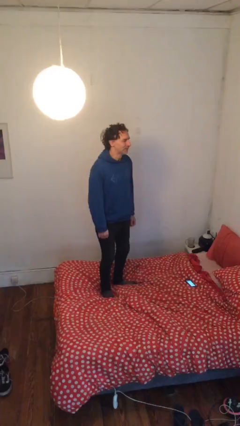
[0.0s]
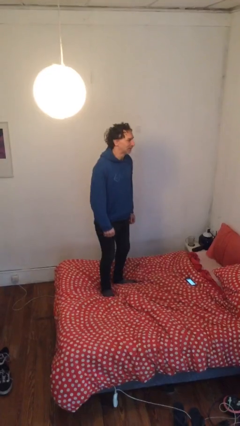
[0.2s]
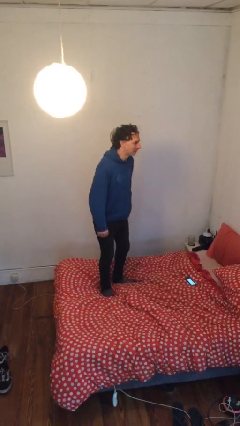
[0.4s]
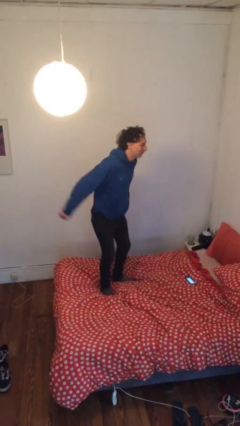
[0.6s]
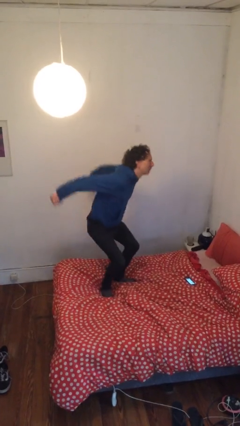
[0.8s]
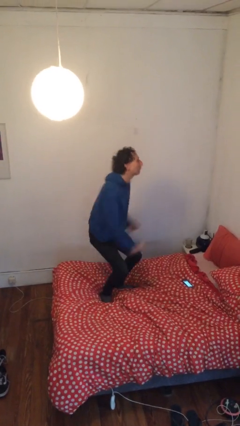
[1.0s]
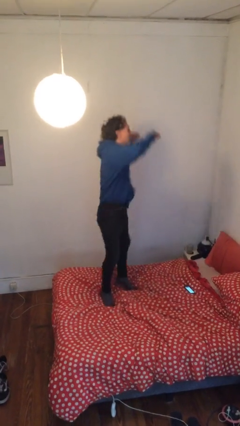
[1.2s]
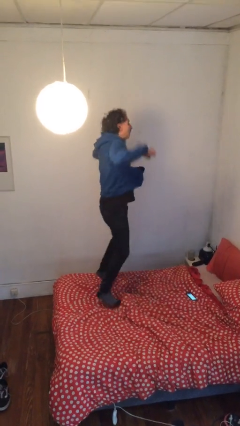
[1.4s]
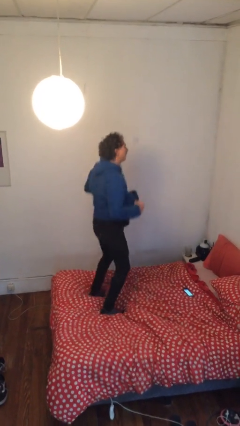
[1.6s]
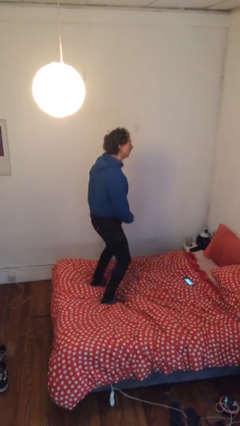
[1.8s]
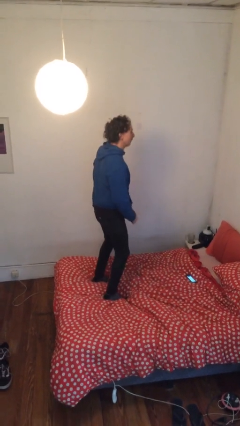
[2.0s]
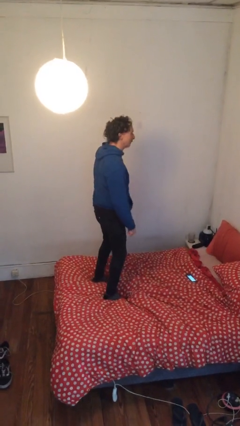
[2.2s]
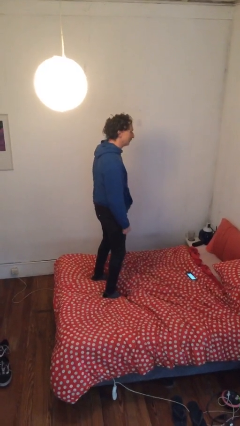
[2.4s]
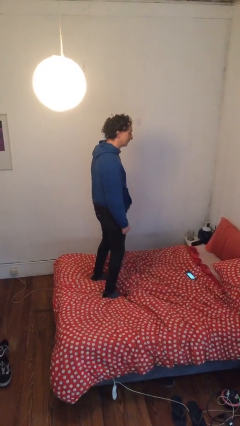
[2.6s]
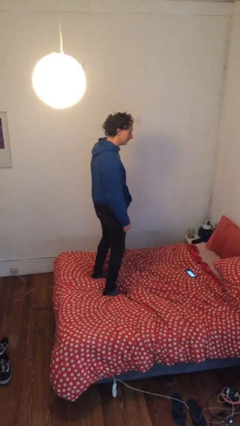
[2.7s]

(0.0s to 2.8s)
person jumps on bed

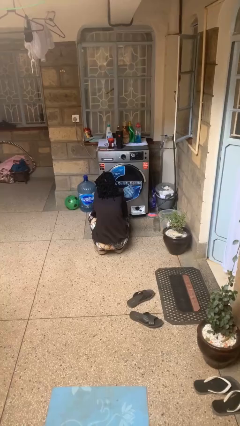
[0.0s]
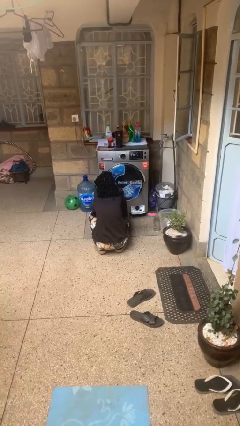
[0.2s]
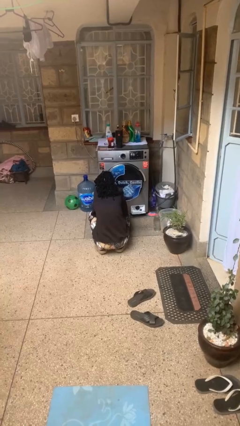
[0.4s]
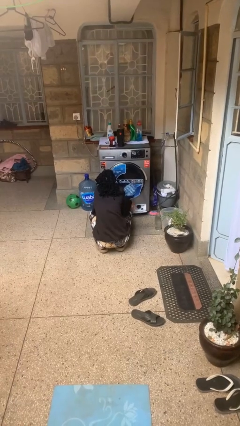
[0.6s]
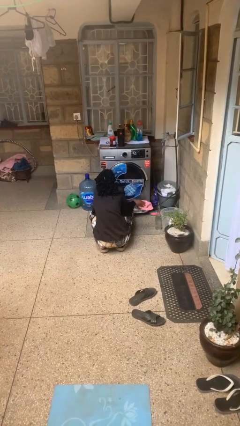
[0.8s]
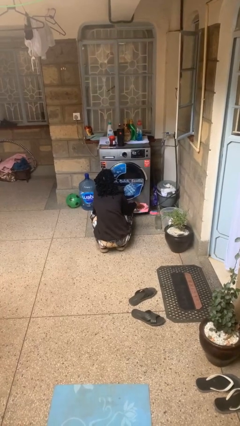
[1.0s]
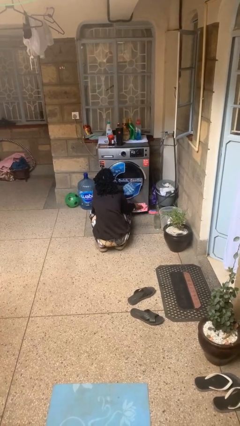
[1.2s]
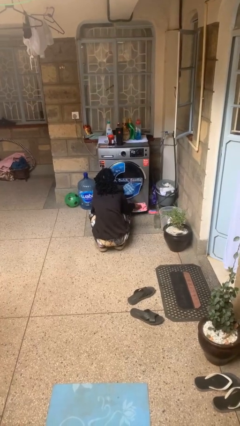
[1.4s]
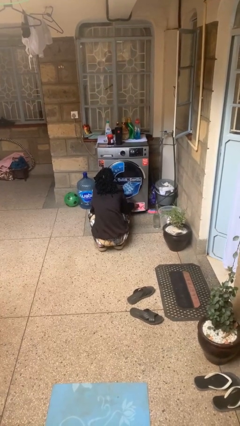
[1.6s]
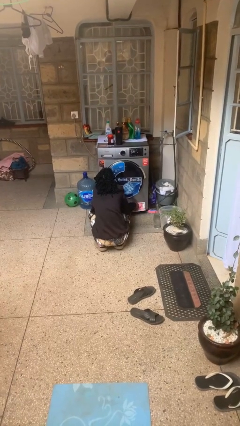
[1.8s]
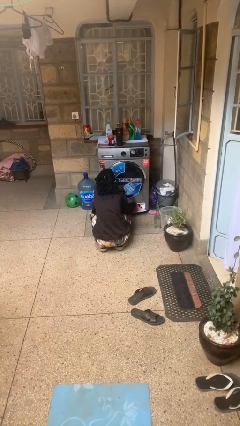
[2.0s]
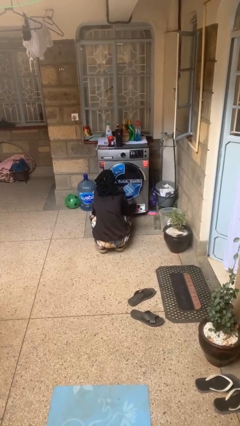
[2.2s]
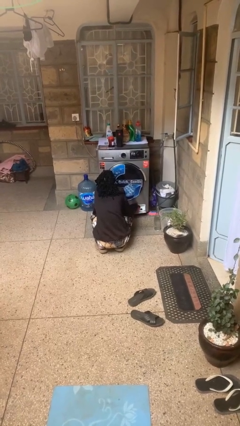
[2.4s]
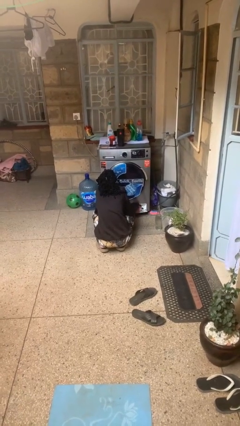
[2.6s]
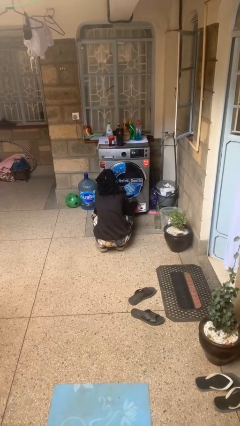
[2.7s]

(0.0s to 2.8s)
person cleans dryer lint trap

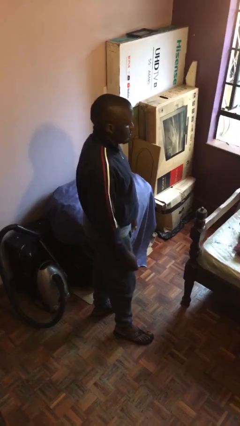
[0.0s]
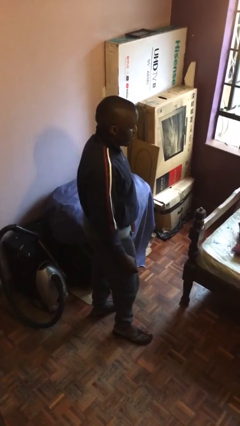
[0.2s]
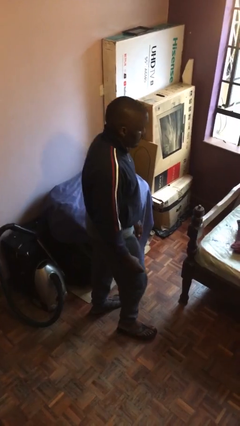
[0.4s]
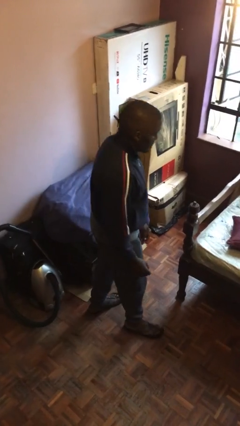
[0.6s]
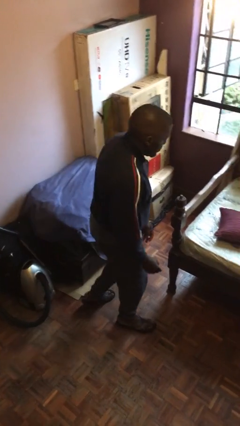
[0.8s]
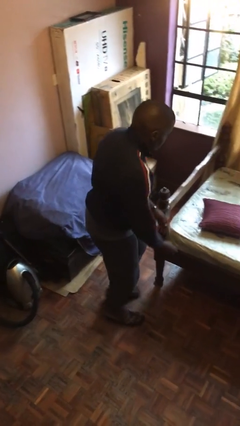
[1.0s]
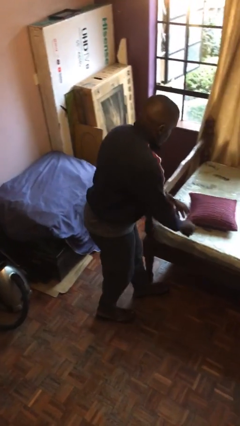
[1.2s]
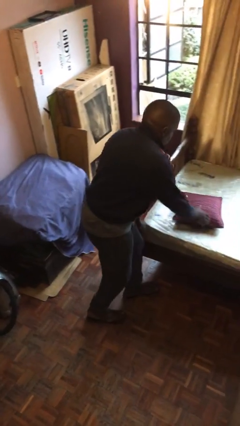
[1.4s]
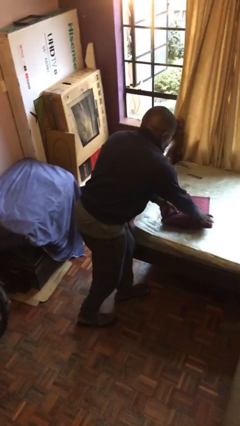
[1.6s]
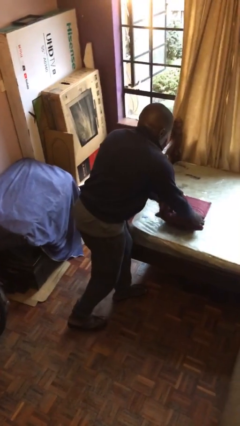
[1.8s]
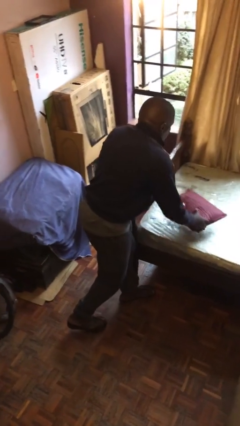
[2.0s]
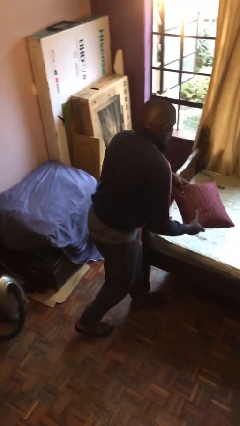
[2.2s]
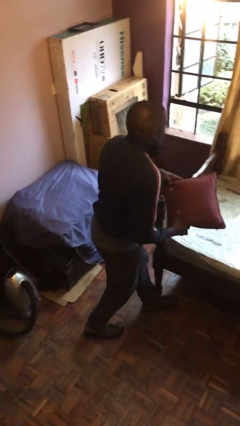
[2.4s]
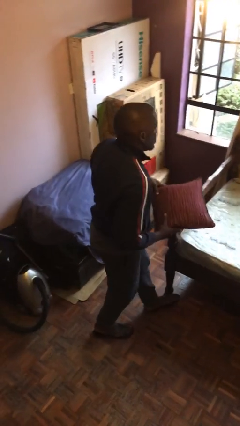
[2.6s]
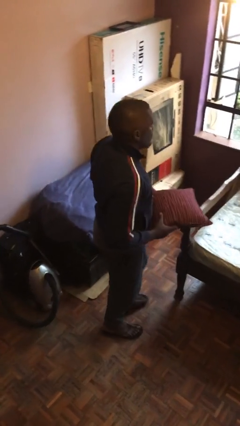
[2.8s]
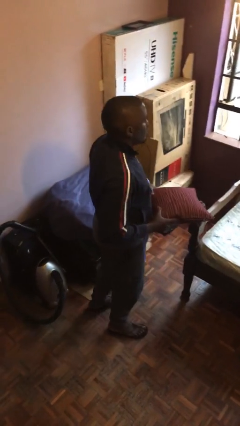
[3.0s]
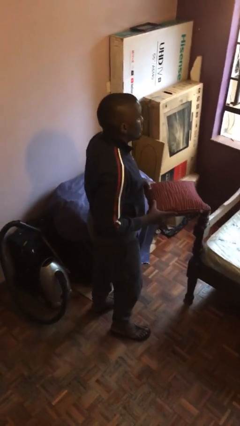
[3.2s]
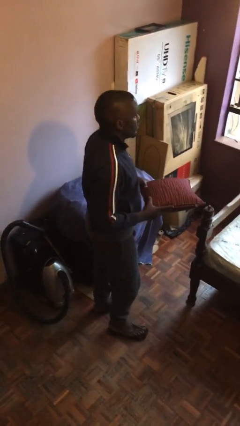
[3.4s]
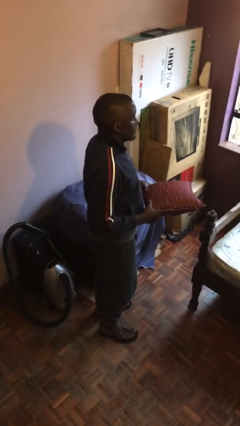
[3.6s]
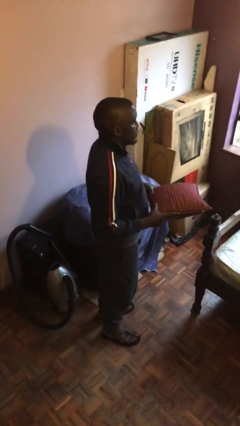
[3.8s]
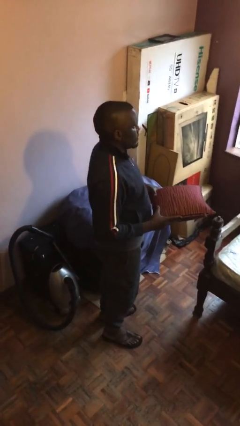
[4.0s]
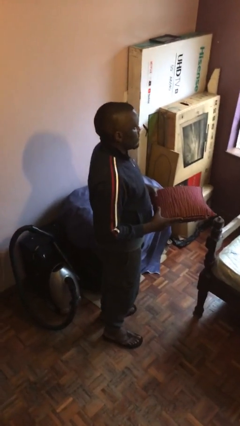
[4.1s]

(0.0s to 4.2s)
person picks up object from bed

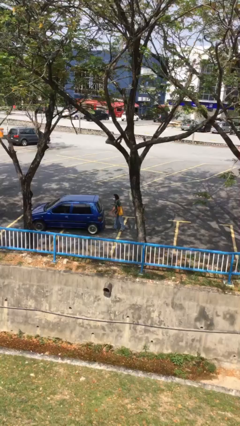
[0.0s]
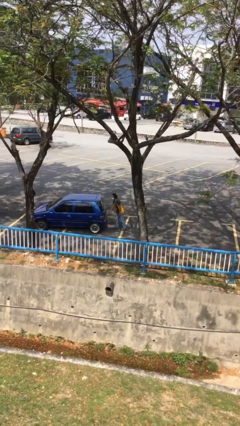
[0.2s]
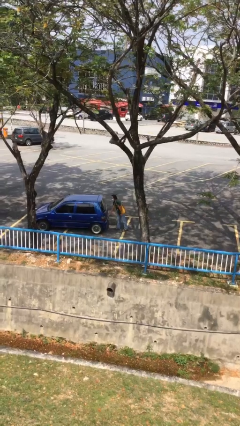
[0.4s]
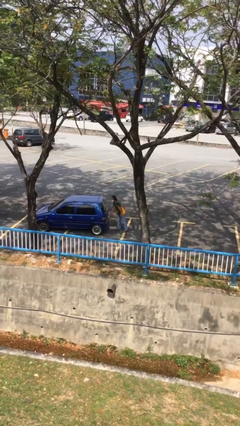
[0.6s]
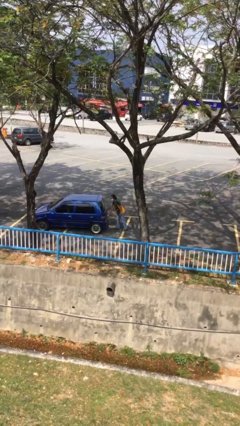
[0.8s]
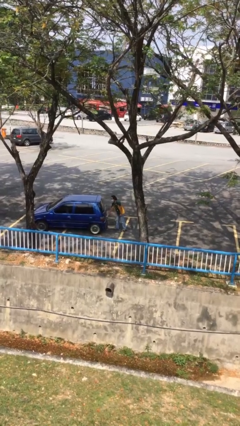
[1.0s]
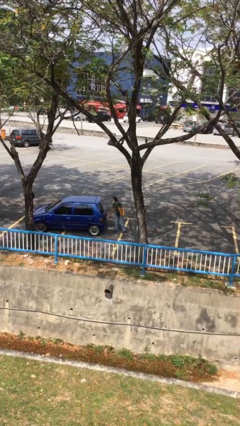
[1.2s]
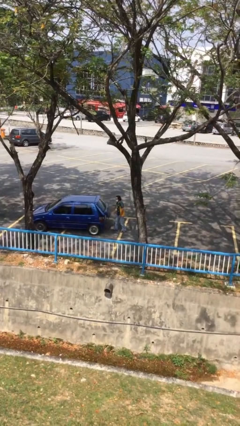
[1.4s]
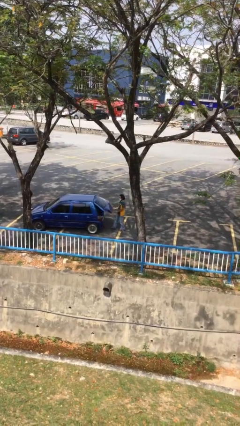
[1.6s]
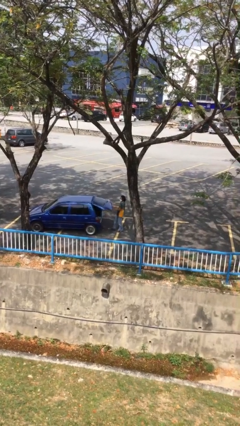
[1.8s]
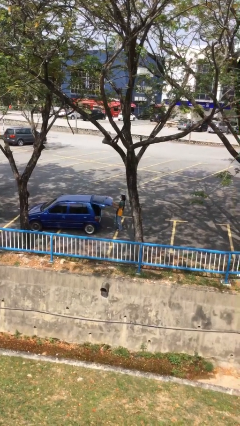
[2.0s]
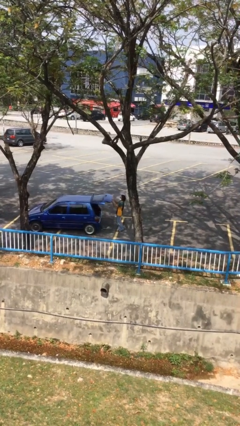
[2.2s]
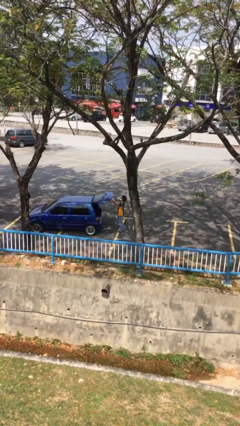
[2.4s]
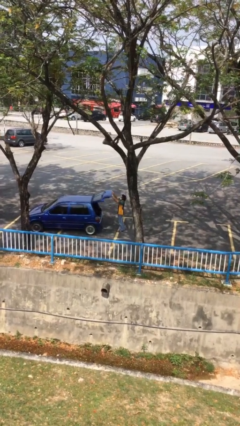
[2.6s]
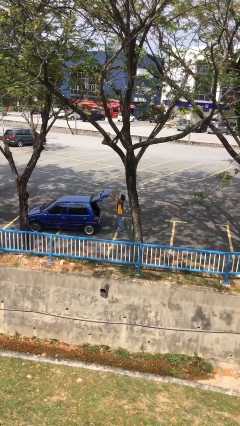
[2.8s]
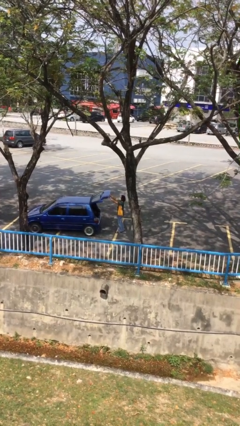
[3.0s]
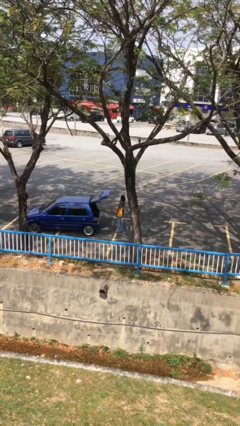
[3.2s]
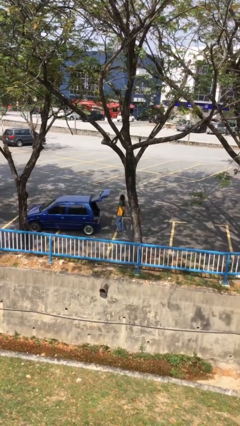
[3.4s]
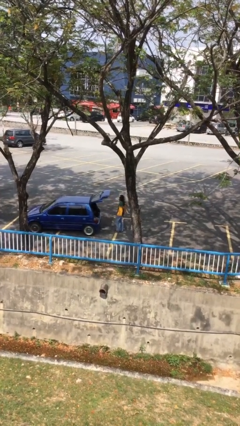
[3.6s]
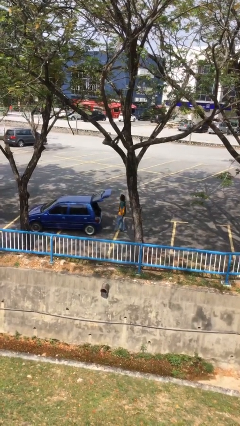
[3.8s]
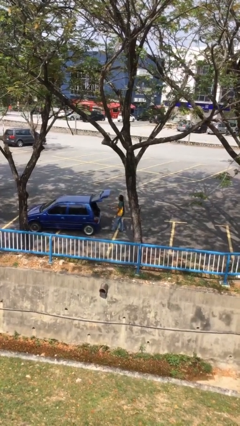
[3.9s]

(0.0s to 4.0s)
person opens car trunk

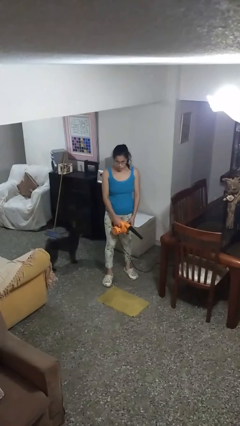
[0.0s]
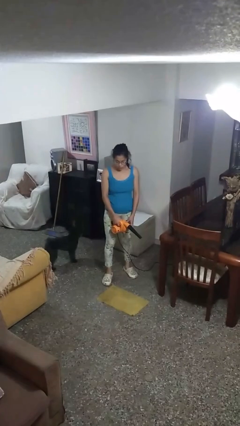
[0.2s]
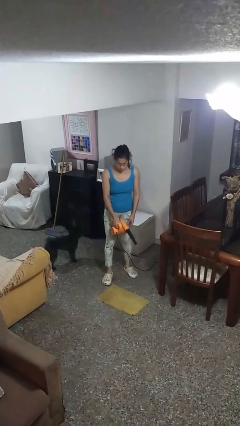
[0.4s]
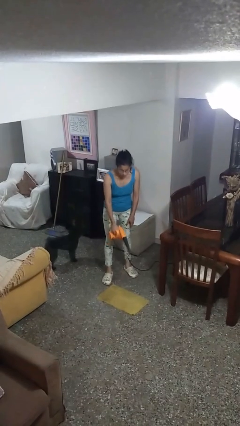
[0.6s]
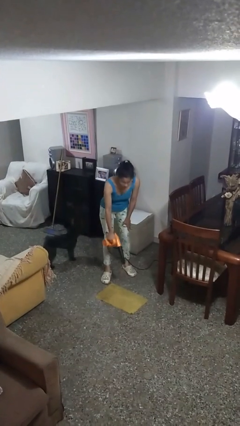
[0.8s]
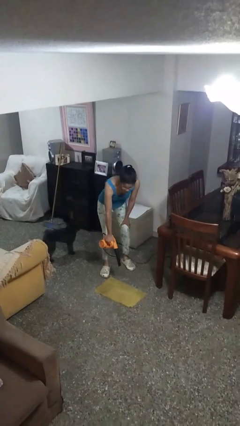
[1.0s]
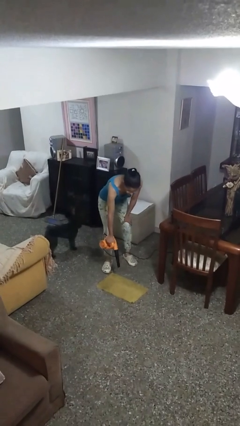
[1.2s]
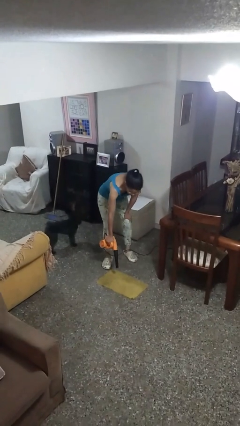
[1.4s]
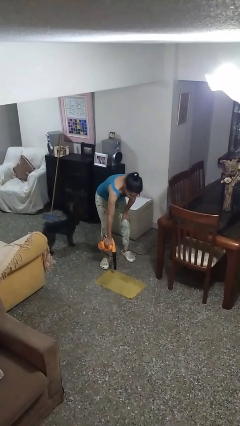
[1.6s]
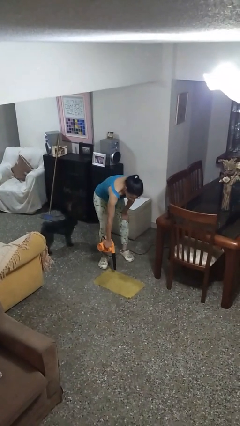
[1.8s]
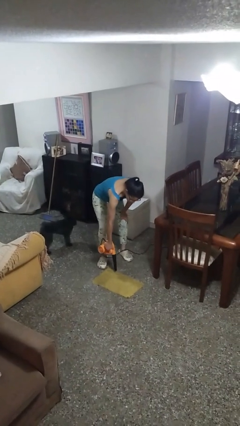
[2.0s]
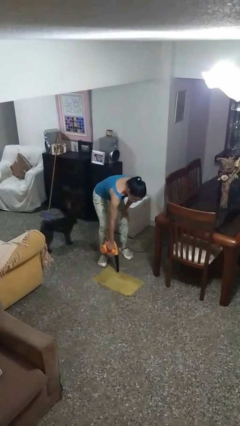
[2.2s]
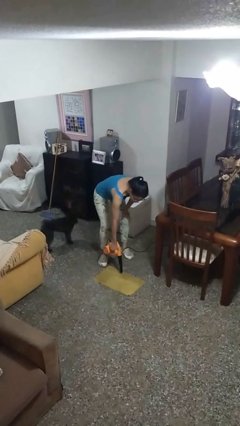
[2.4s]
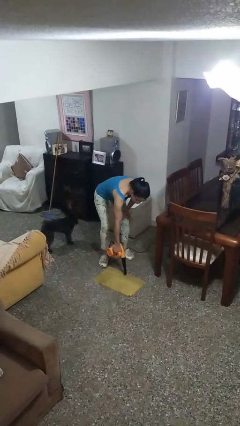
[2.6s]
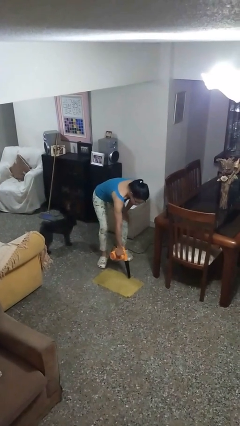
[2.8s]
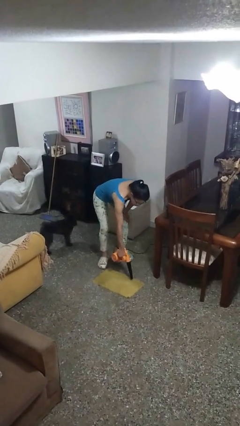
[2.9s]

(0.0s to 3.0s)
person vacuums carpet

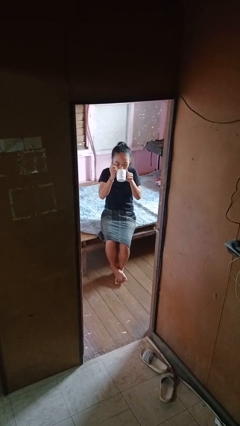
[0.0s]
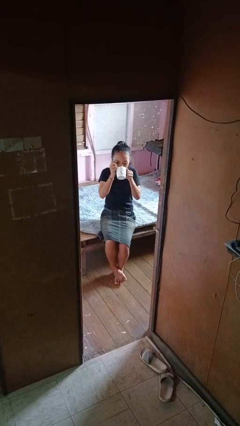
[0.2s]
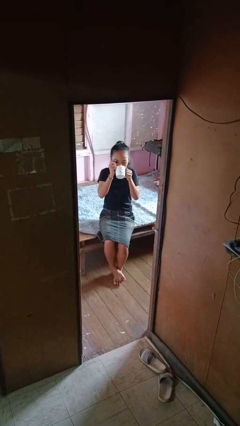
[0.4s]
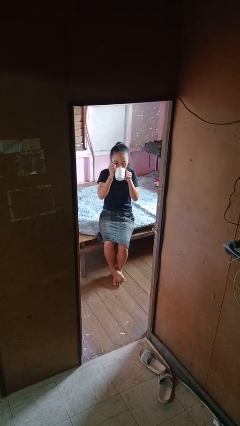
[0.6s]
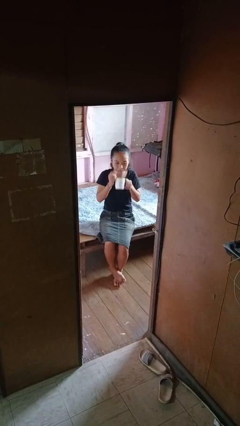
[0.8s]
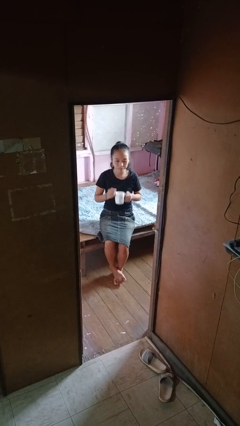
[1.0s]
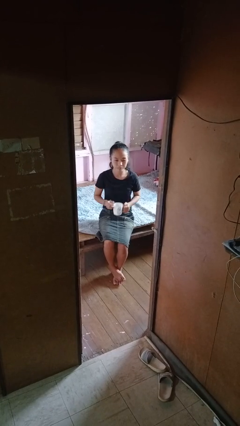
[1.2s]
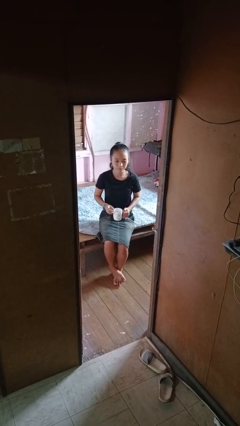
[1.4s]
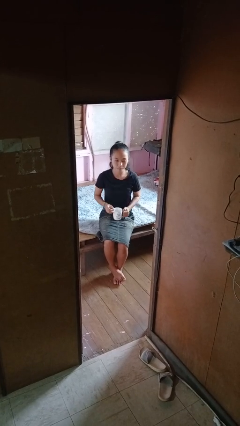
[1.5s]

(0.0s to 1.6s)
person drinks from mug
